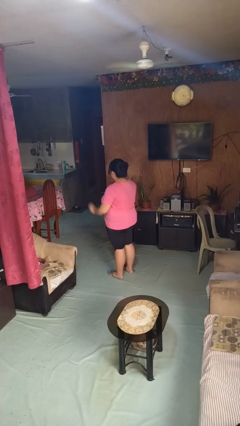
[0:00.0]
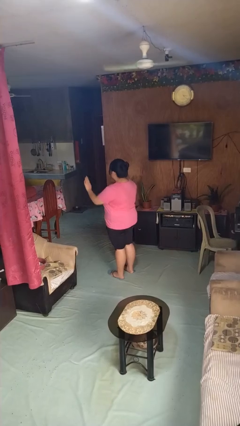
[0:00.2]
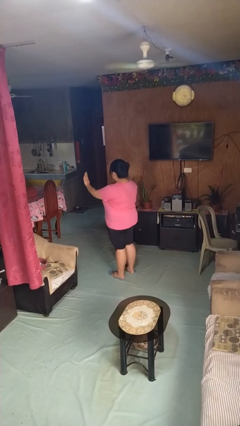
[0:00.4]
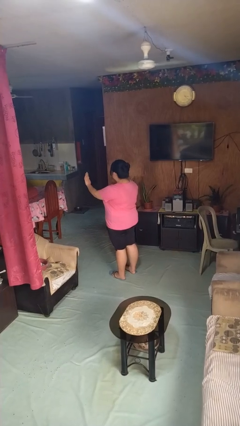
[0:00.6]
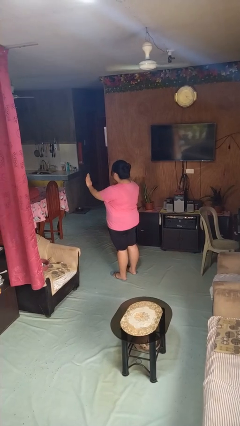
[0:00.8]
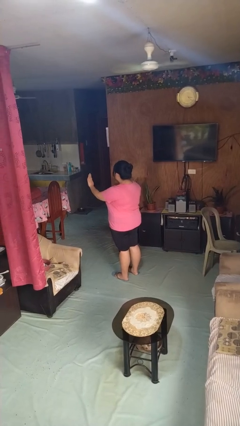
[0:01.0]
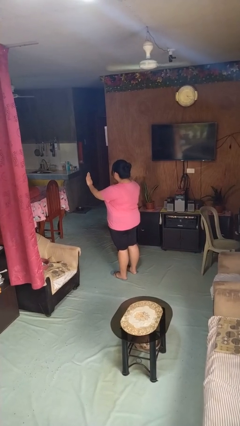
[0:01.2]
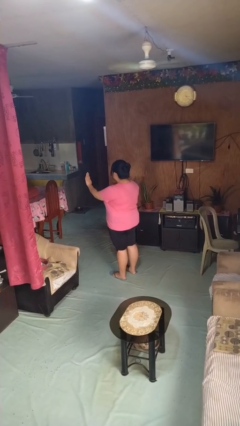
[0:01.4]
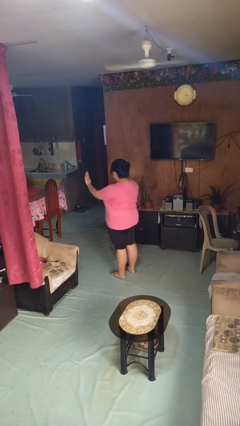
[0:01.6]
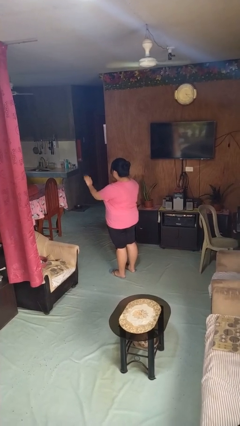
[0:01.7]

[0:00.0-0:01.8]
person gestures stop

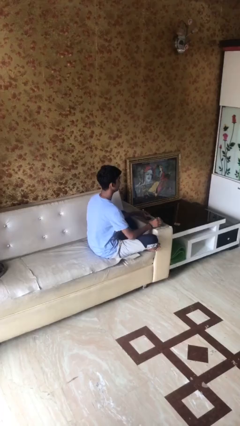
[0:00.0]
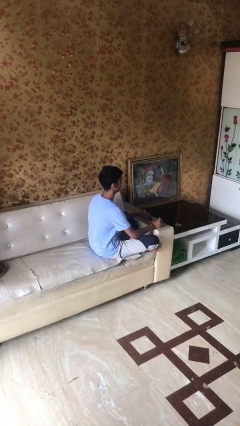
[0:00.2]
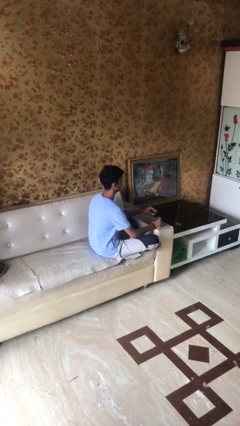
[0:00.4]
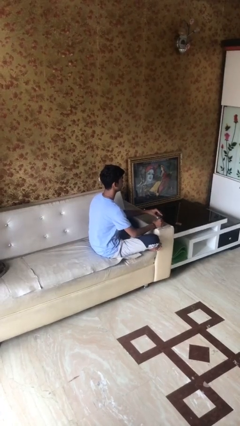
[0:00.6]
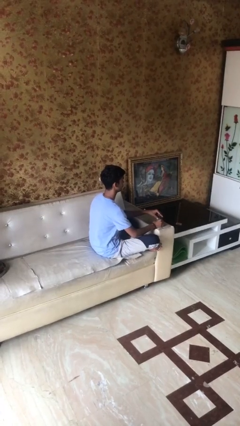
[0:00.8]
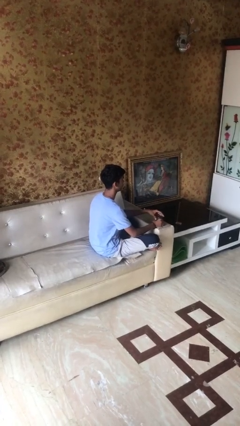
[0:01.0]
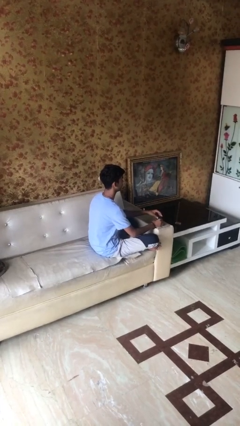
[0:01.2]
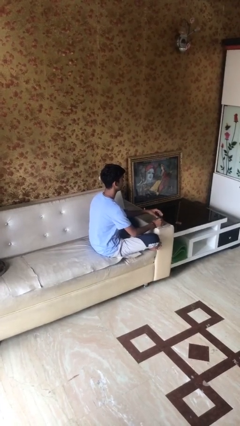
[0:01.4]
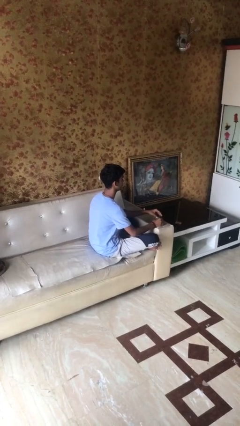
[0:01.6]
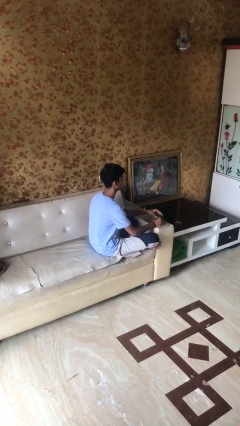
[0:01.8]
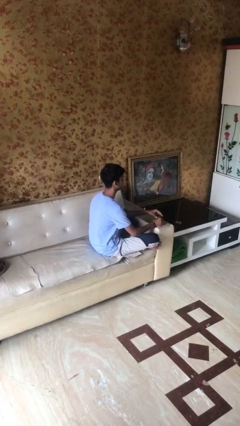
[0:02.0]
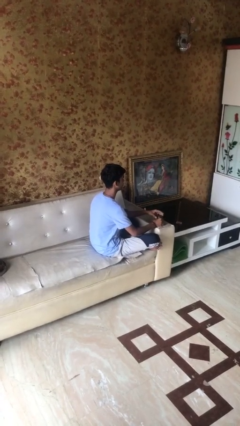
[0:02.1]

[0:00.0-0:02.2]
person closes jar

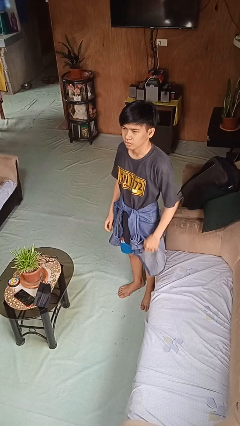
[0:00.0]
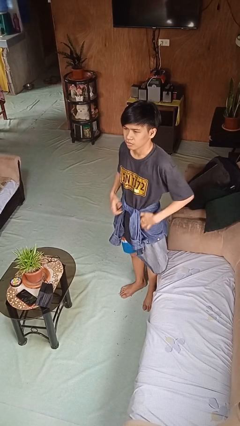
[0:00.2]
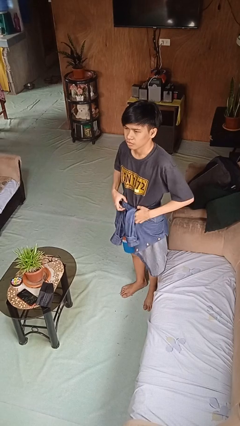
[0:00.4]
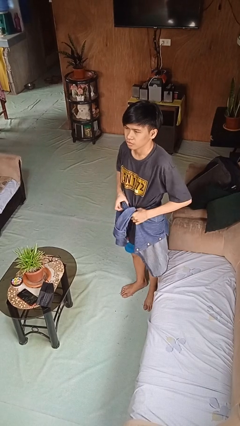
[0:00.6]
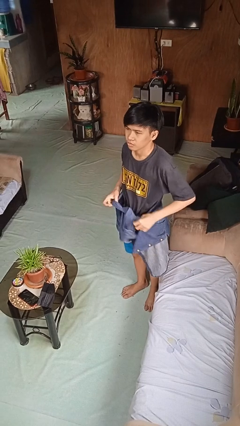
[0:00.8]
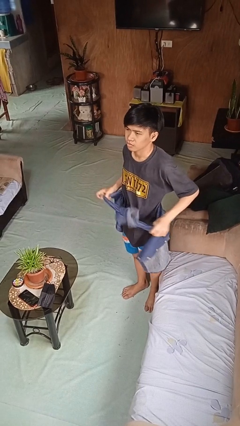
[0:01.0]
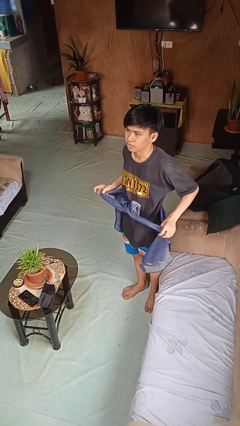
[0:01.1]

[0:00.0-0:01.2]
person unties jacket around waist

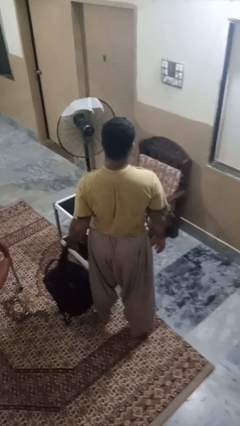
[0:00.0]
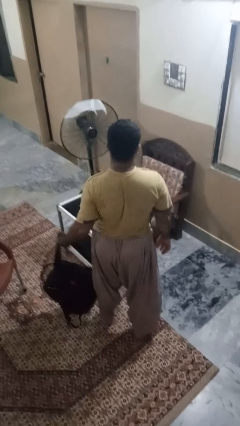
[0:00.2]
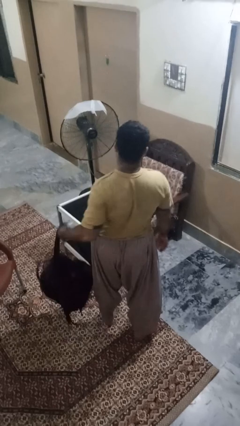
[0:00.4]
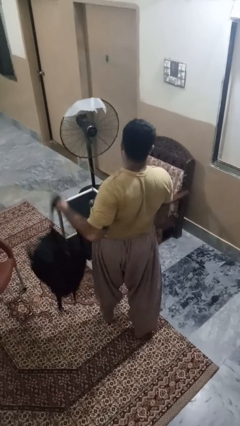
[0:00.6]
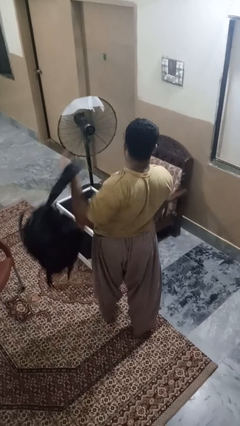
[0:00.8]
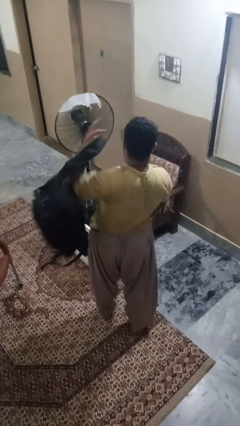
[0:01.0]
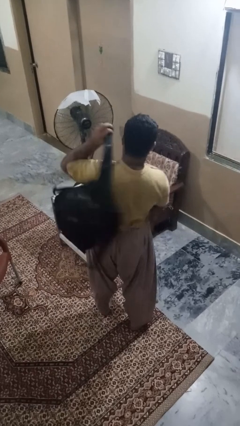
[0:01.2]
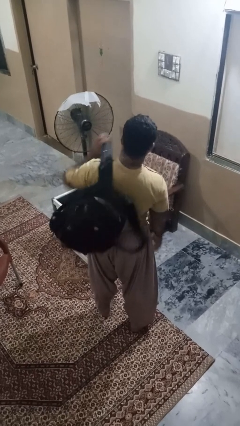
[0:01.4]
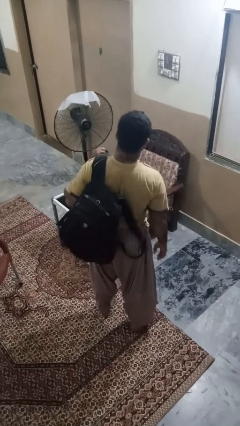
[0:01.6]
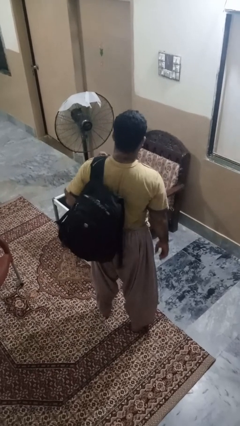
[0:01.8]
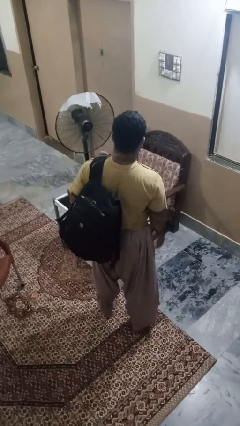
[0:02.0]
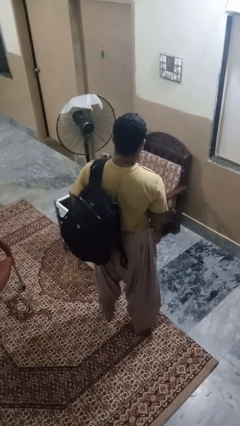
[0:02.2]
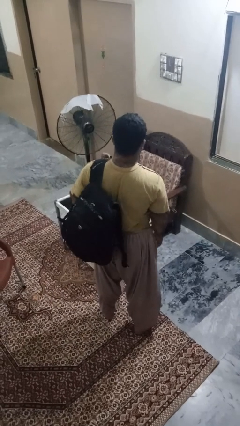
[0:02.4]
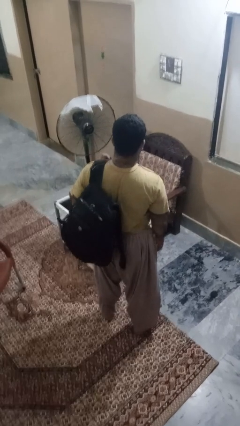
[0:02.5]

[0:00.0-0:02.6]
person puts on backpack

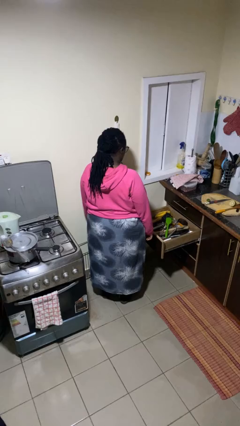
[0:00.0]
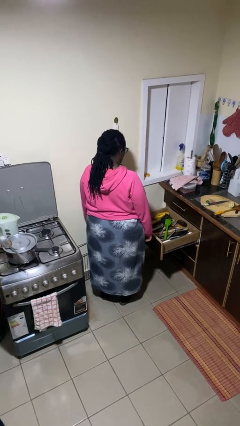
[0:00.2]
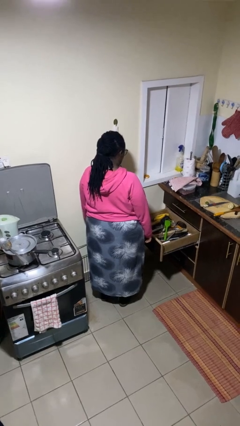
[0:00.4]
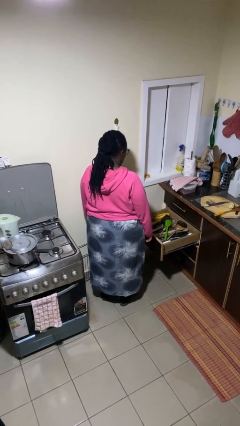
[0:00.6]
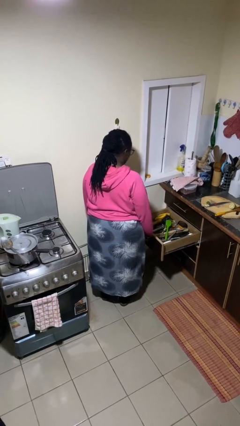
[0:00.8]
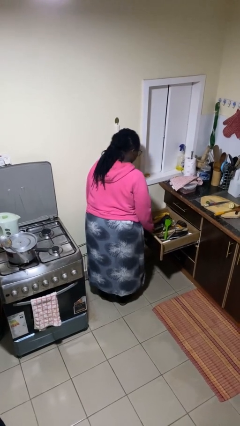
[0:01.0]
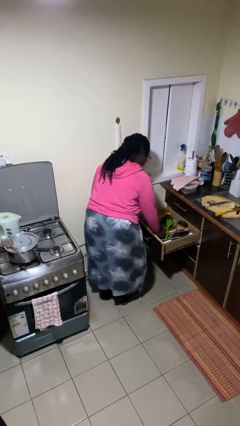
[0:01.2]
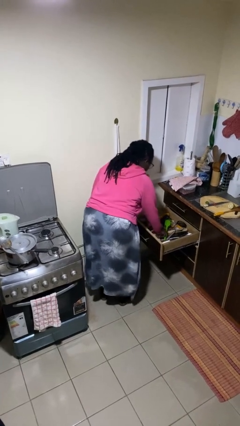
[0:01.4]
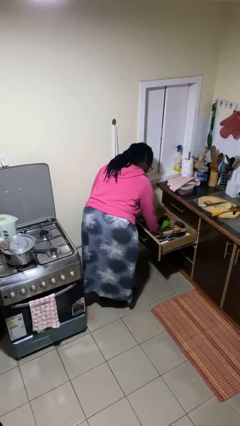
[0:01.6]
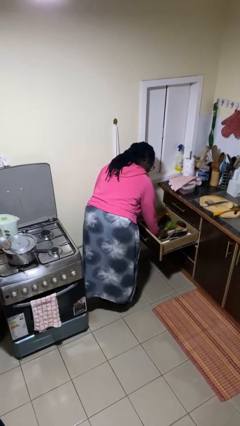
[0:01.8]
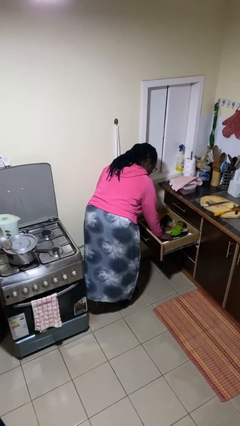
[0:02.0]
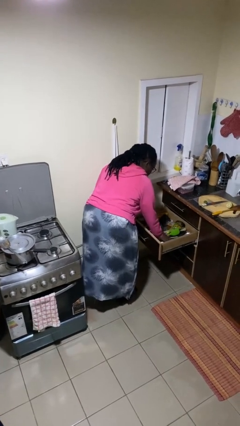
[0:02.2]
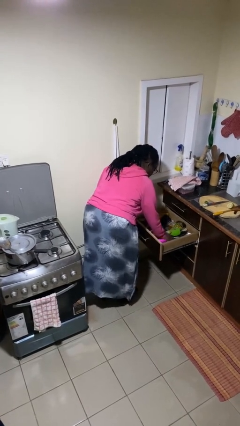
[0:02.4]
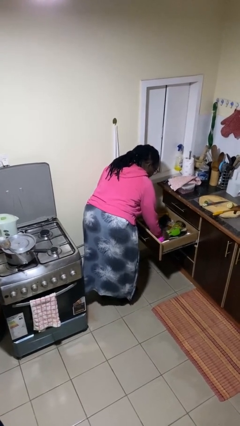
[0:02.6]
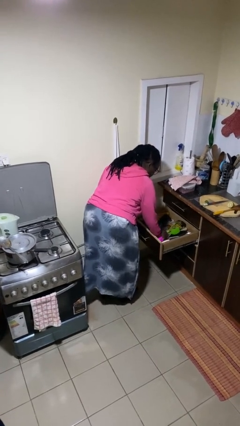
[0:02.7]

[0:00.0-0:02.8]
person searches in kitchen drawer

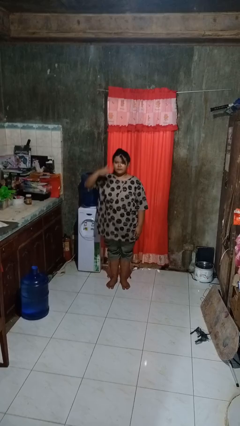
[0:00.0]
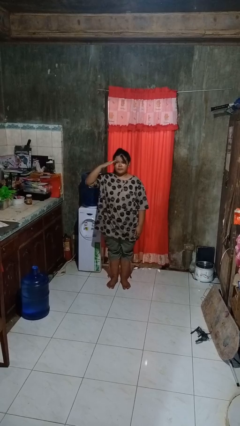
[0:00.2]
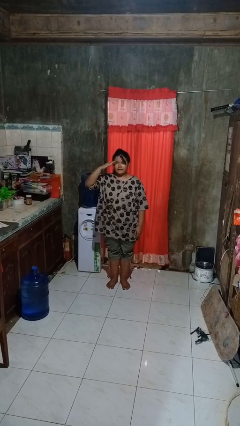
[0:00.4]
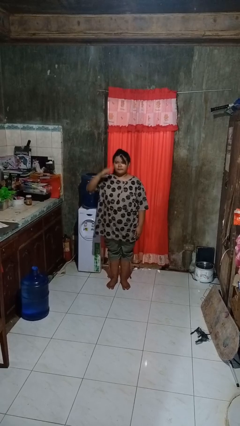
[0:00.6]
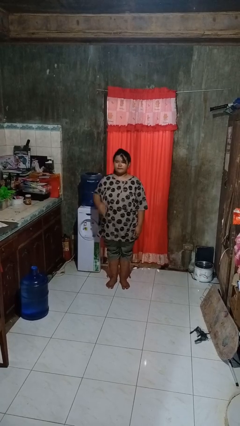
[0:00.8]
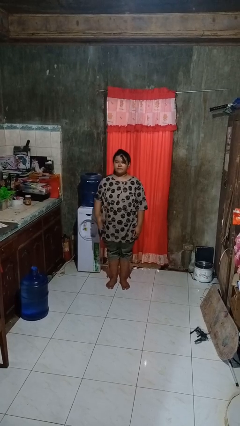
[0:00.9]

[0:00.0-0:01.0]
person salutes

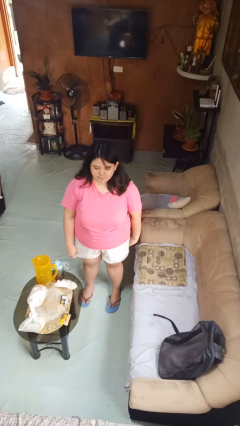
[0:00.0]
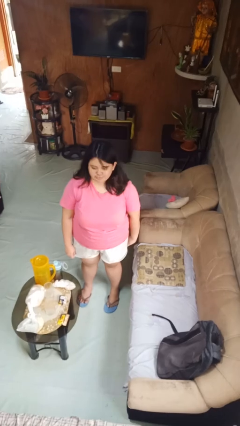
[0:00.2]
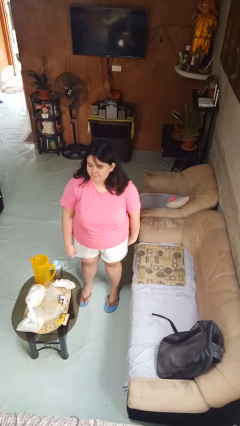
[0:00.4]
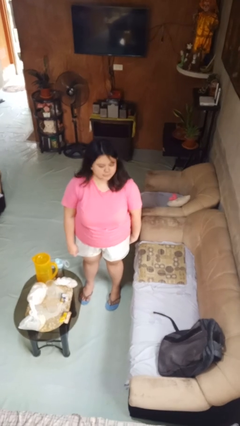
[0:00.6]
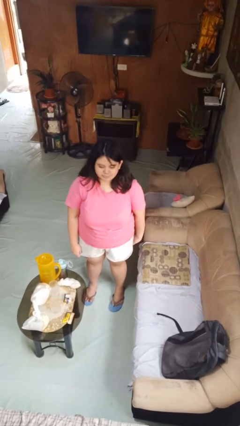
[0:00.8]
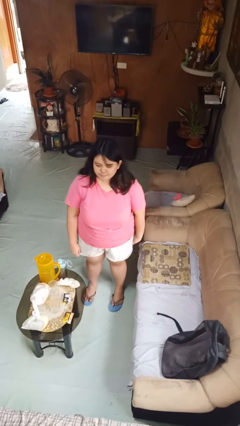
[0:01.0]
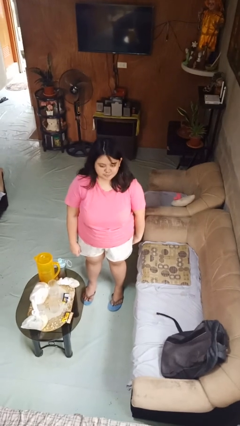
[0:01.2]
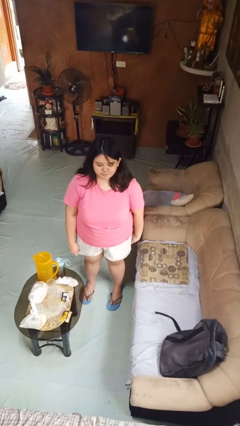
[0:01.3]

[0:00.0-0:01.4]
person shakes head

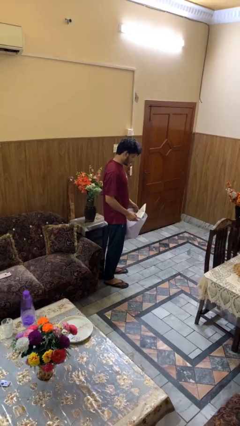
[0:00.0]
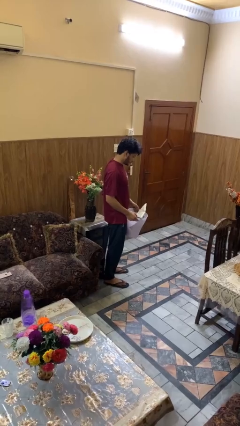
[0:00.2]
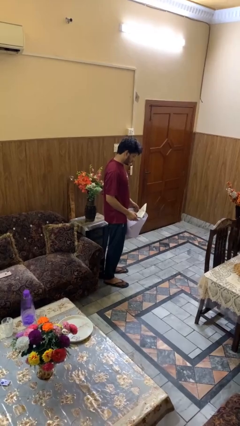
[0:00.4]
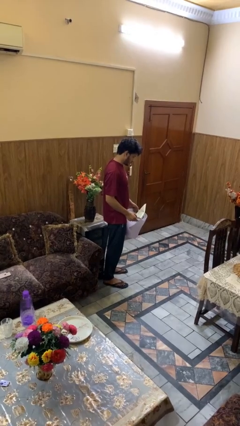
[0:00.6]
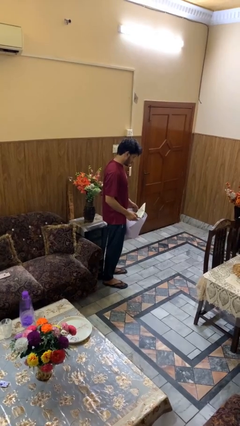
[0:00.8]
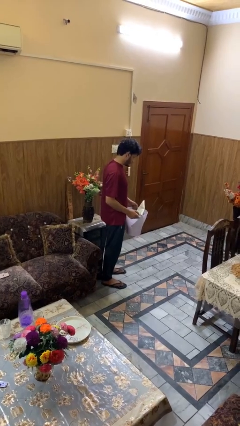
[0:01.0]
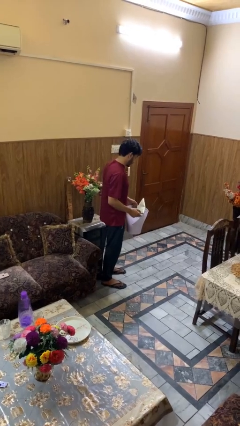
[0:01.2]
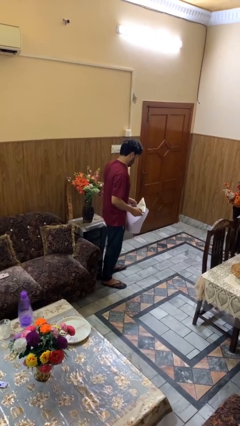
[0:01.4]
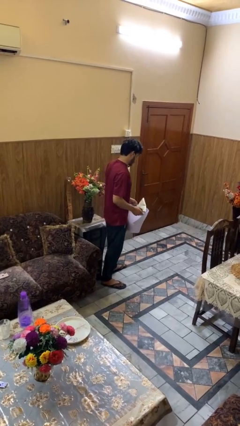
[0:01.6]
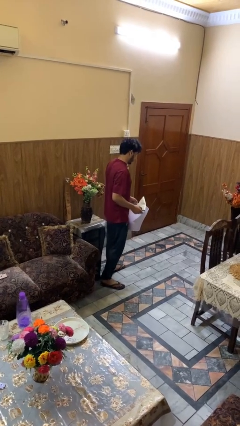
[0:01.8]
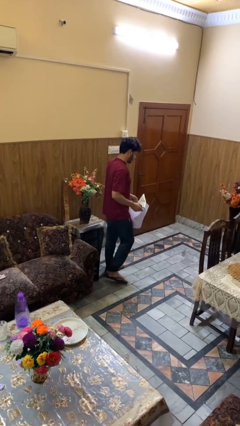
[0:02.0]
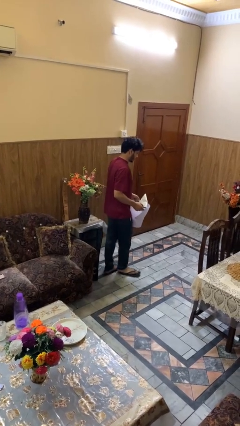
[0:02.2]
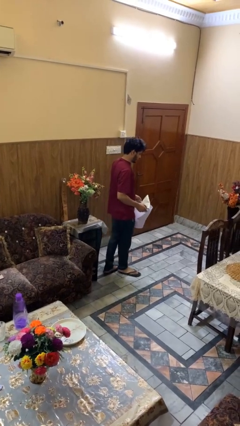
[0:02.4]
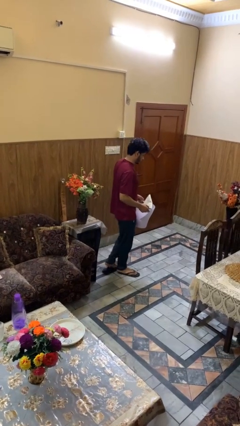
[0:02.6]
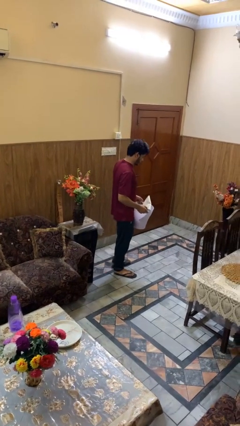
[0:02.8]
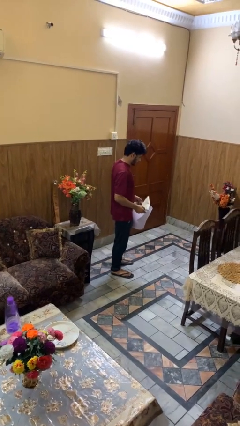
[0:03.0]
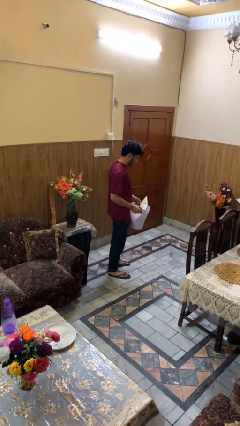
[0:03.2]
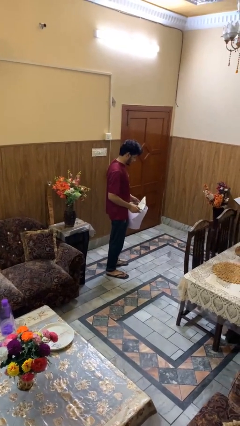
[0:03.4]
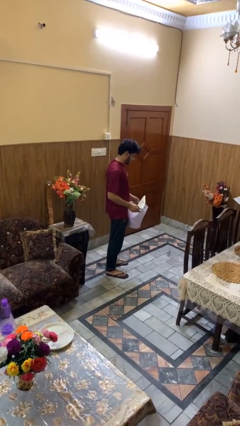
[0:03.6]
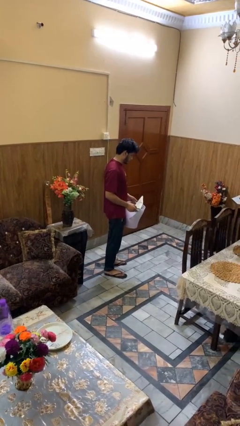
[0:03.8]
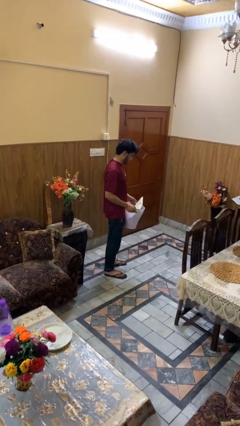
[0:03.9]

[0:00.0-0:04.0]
person carries laundry basket
